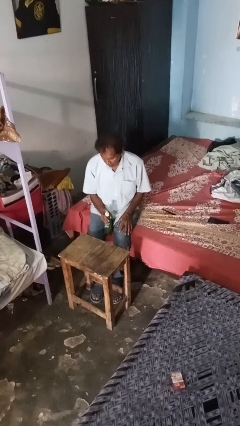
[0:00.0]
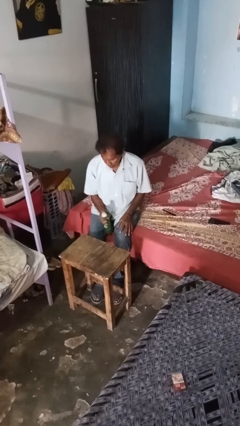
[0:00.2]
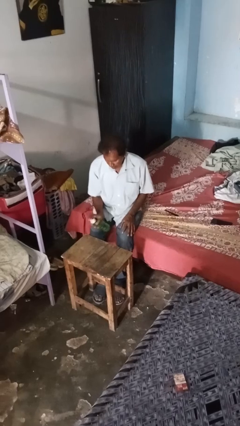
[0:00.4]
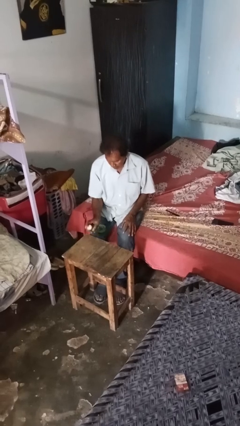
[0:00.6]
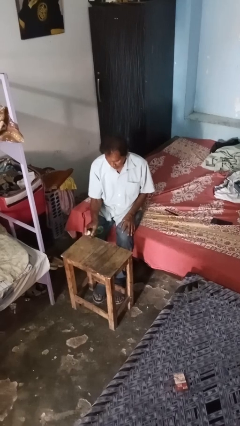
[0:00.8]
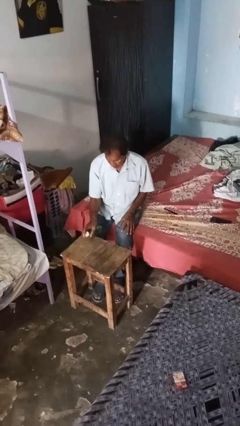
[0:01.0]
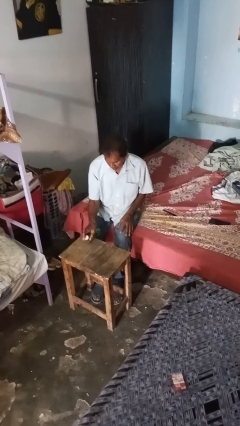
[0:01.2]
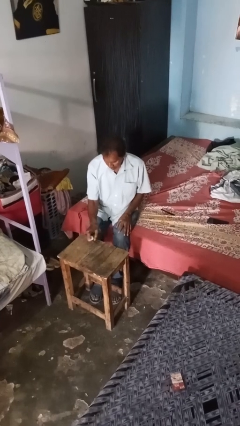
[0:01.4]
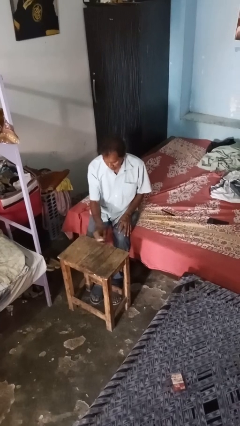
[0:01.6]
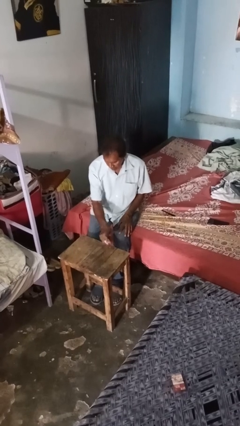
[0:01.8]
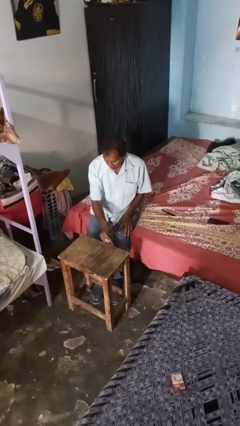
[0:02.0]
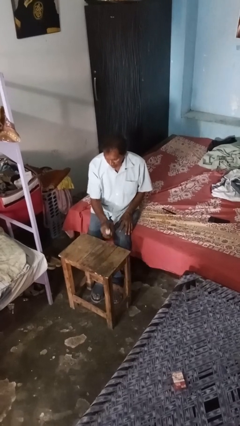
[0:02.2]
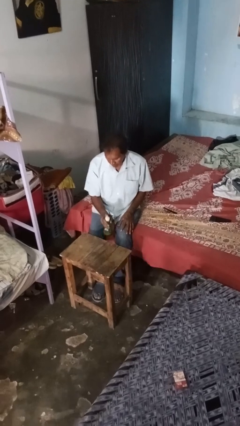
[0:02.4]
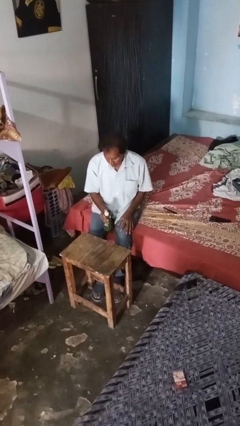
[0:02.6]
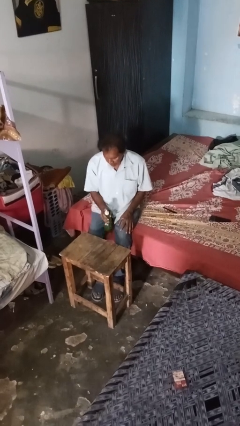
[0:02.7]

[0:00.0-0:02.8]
person sprays from bottle

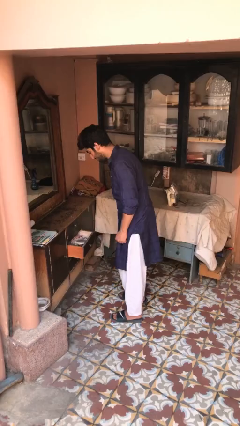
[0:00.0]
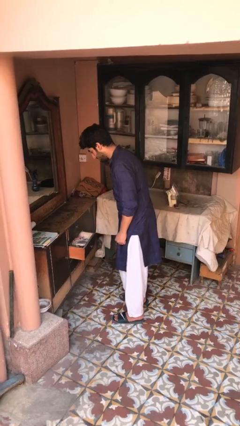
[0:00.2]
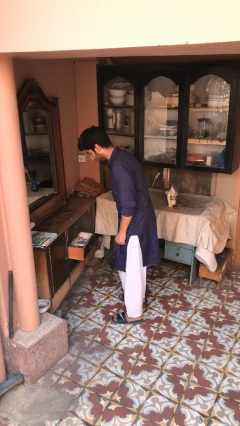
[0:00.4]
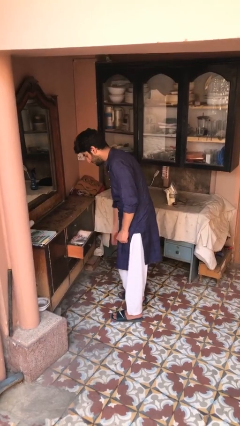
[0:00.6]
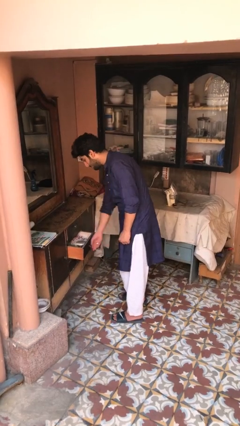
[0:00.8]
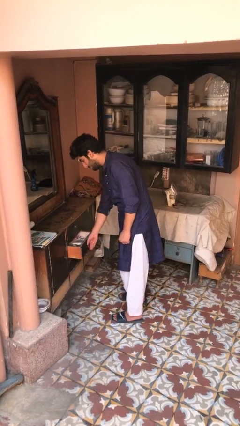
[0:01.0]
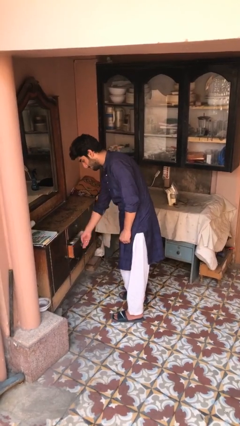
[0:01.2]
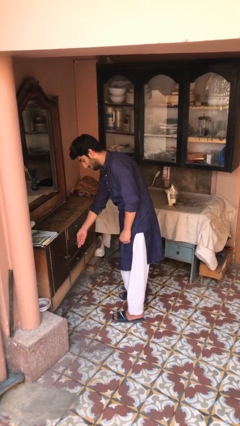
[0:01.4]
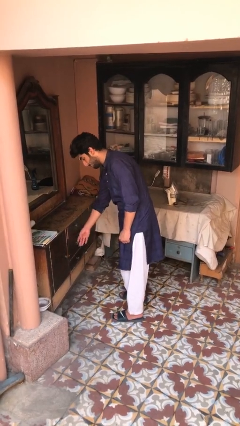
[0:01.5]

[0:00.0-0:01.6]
person closes dresser drawer

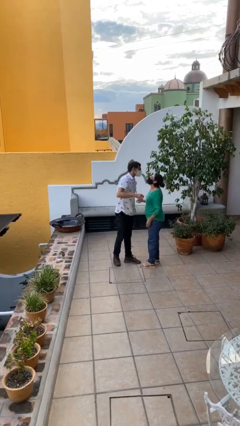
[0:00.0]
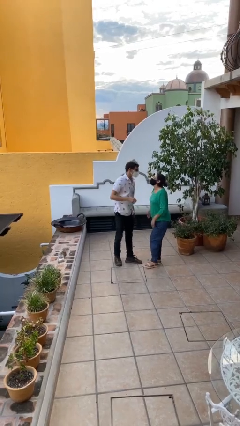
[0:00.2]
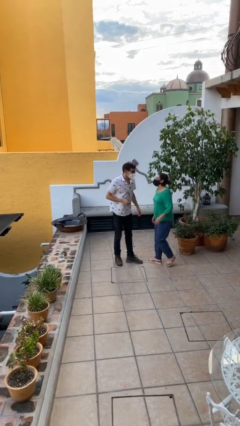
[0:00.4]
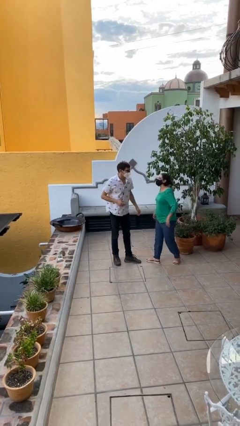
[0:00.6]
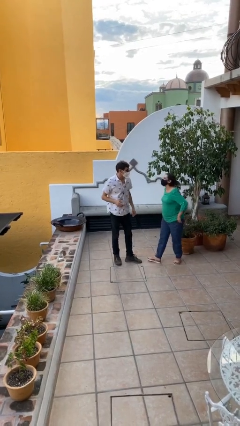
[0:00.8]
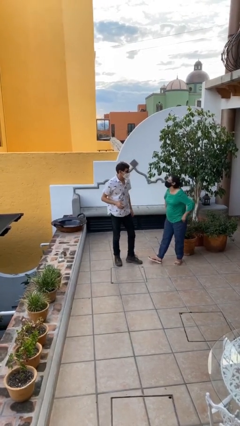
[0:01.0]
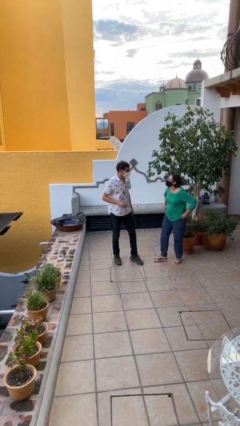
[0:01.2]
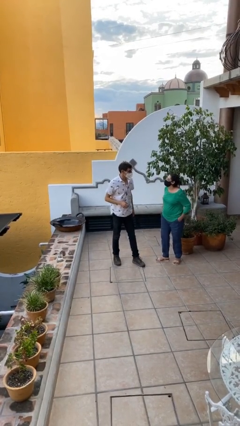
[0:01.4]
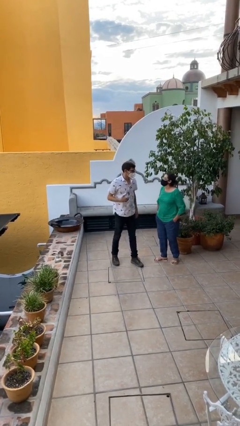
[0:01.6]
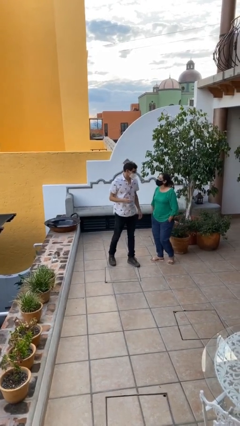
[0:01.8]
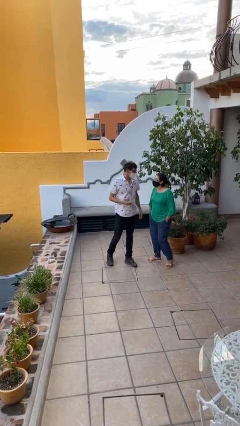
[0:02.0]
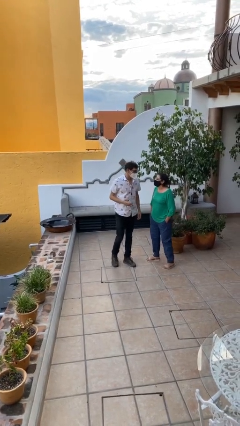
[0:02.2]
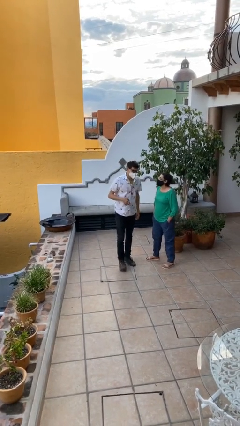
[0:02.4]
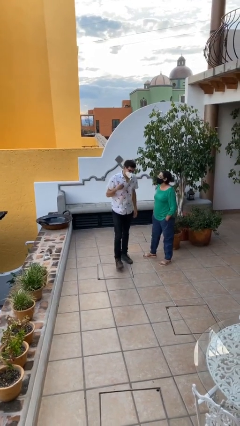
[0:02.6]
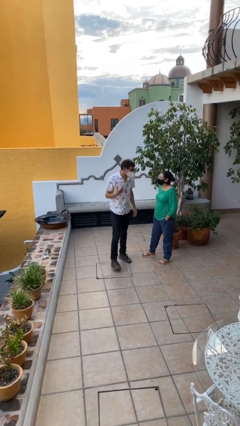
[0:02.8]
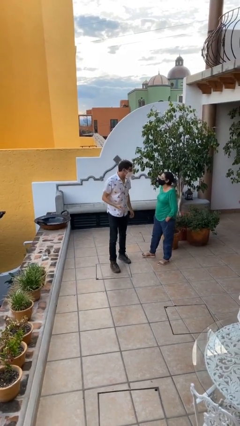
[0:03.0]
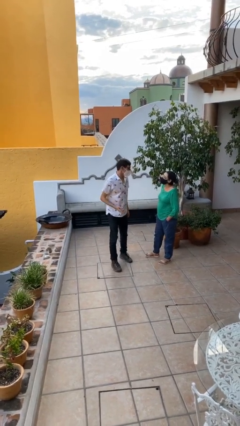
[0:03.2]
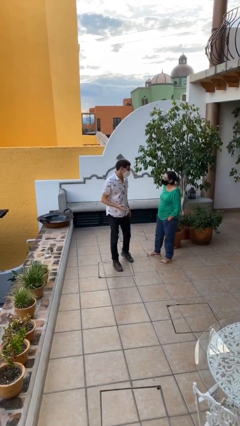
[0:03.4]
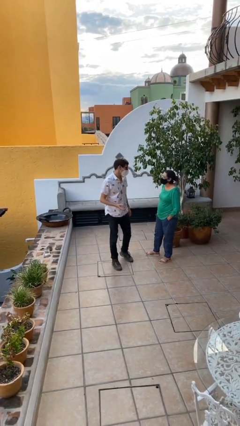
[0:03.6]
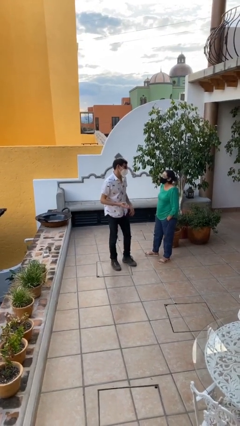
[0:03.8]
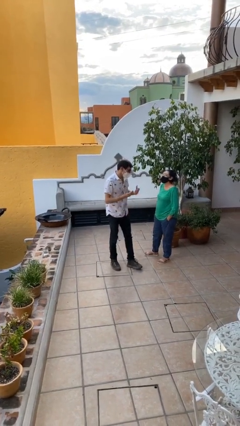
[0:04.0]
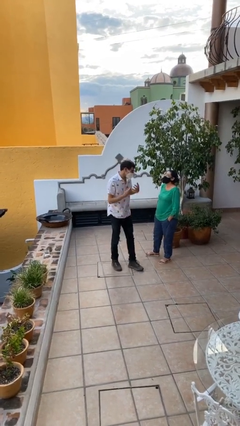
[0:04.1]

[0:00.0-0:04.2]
person talks to person

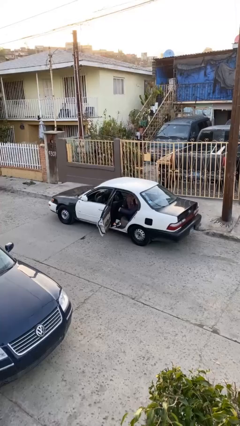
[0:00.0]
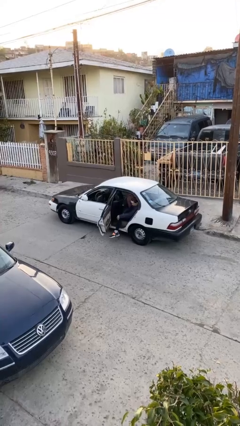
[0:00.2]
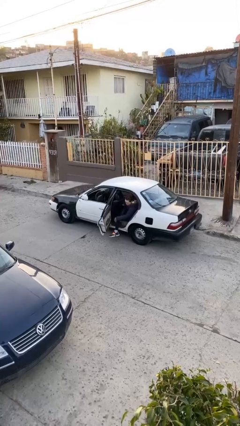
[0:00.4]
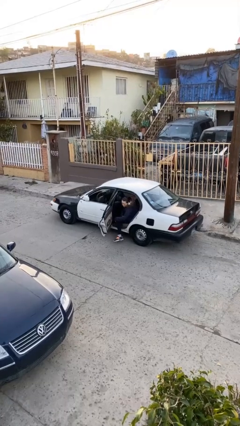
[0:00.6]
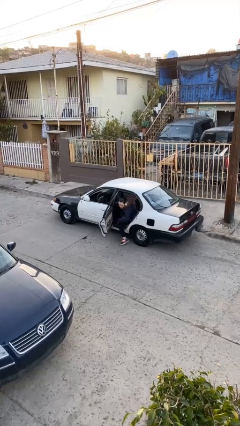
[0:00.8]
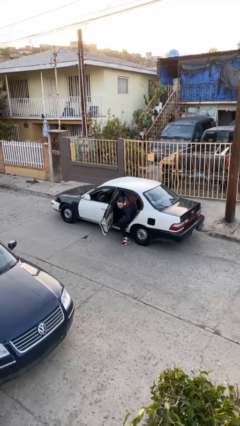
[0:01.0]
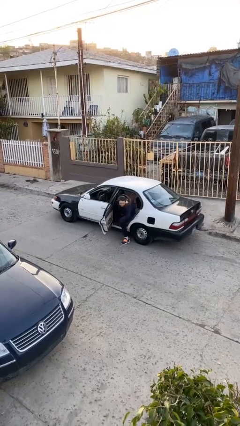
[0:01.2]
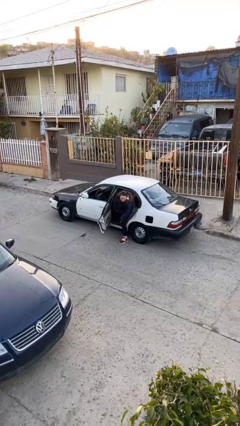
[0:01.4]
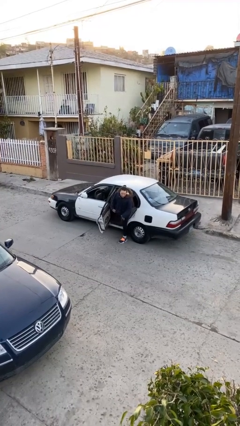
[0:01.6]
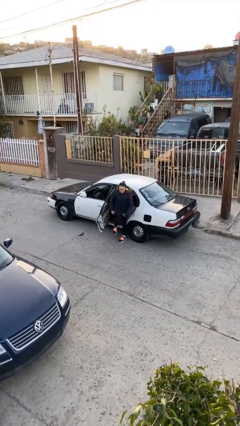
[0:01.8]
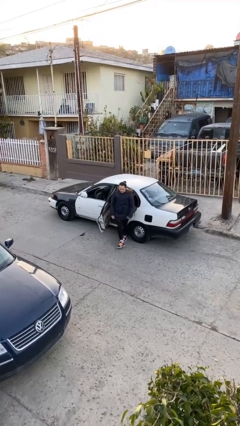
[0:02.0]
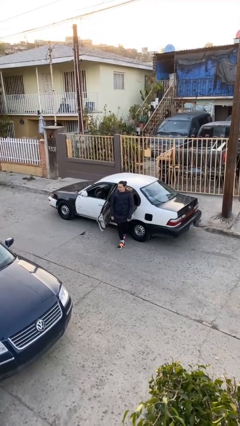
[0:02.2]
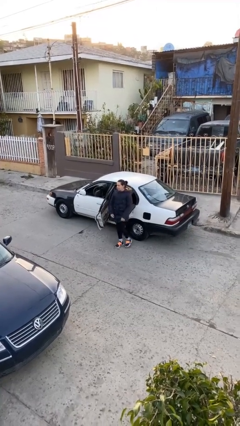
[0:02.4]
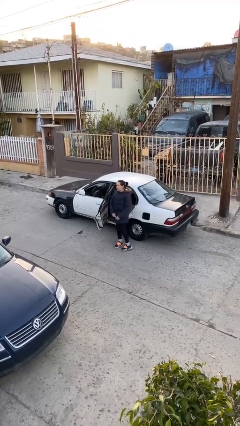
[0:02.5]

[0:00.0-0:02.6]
person exits car

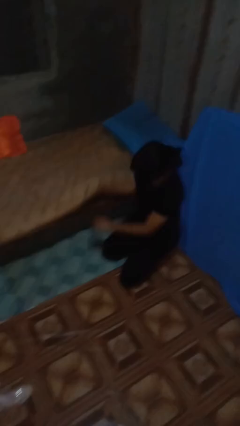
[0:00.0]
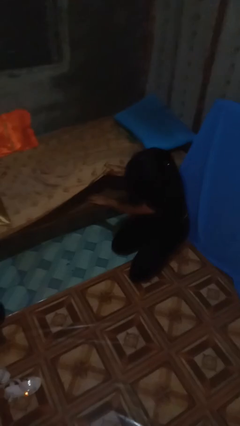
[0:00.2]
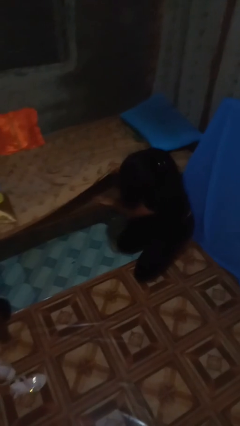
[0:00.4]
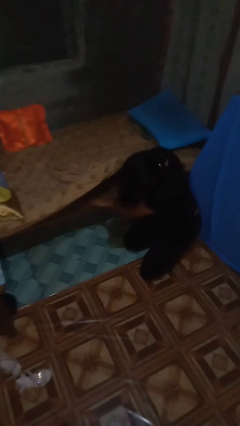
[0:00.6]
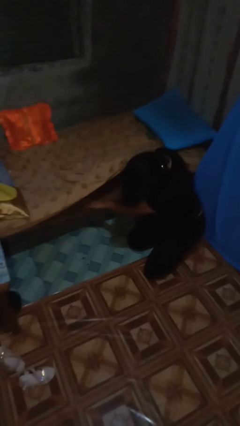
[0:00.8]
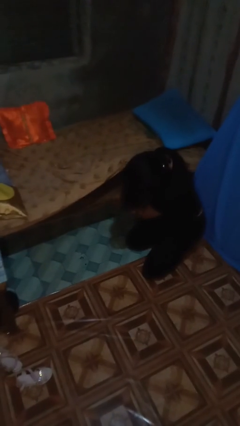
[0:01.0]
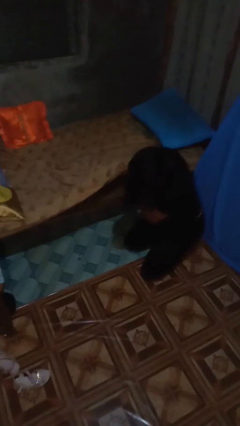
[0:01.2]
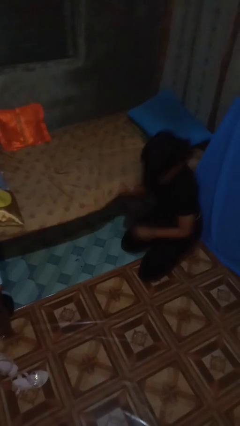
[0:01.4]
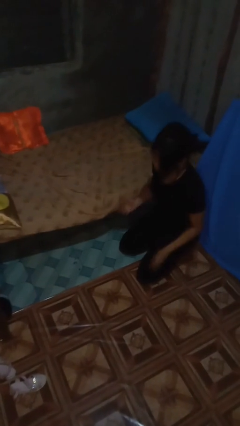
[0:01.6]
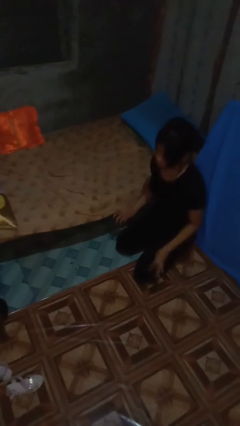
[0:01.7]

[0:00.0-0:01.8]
person searches under bed

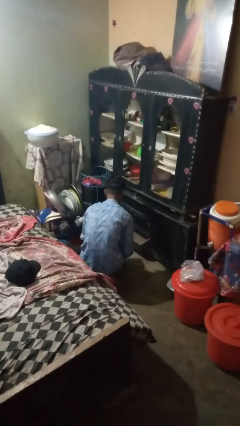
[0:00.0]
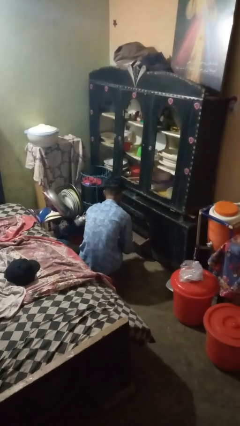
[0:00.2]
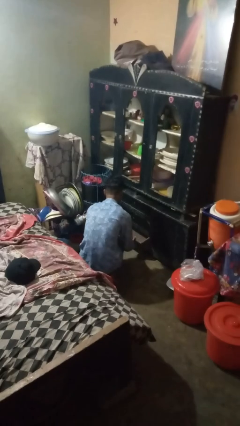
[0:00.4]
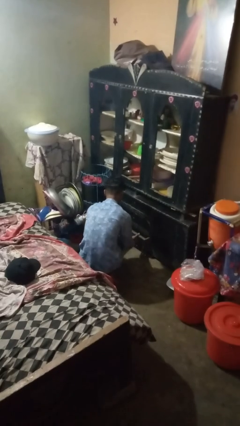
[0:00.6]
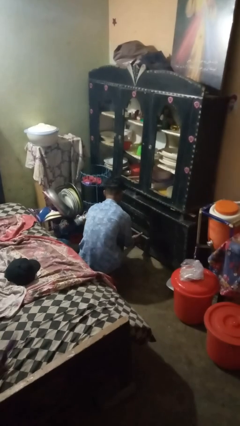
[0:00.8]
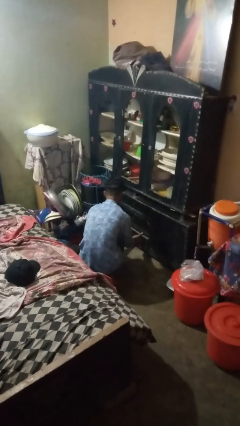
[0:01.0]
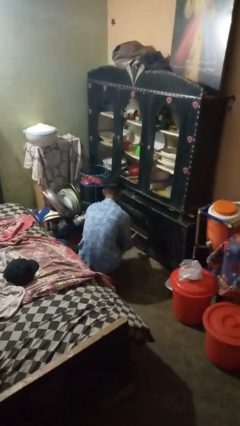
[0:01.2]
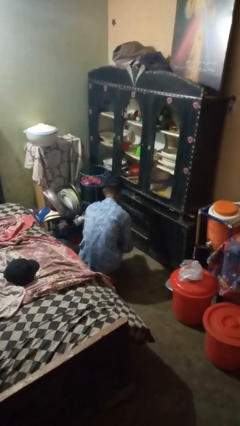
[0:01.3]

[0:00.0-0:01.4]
person closes kitchen drawer

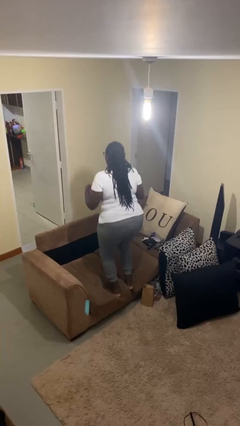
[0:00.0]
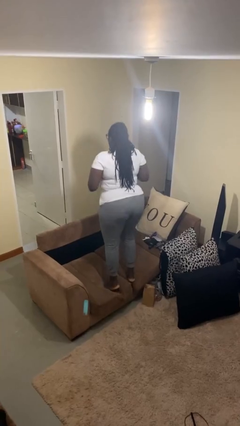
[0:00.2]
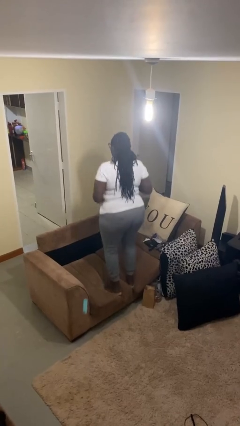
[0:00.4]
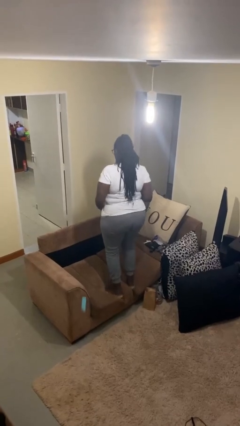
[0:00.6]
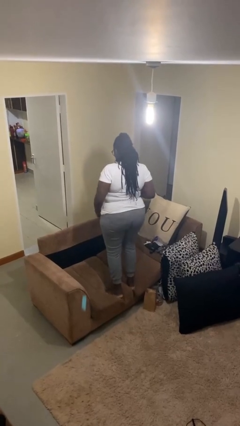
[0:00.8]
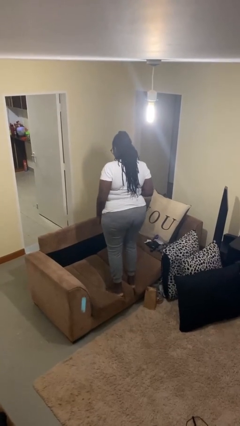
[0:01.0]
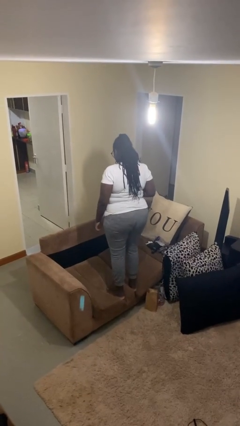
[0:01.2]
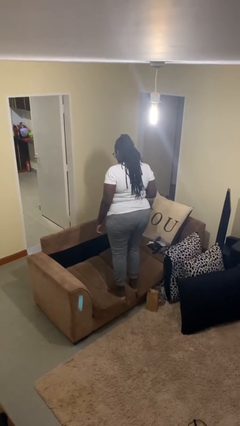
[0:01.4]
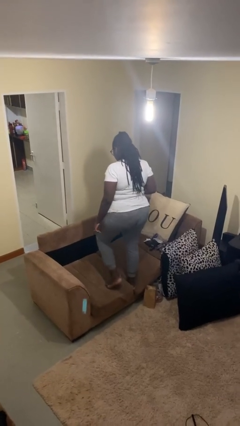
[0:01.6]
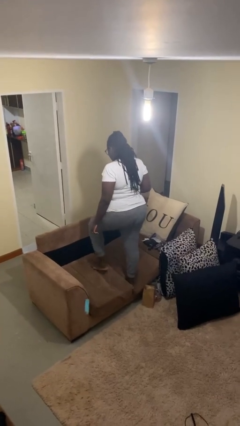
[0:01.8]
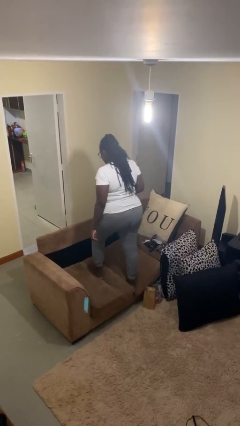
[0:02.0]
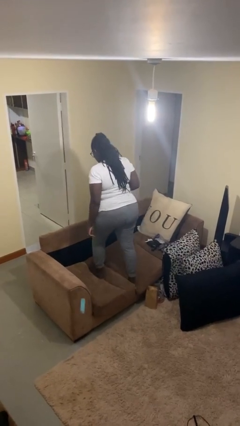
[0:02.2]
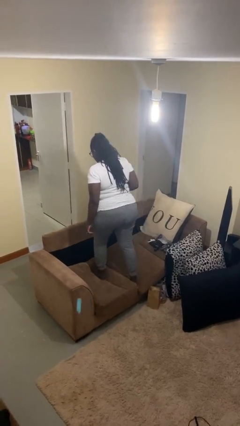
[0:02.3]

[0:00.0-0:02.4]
person jumps on couch

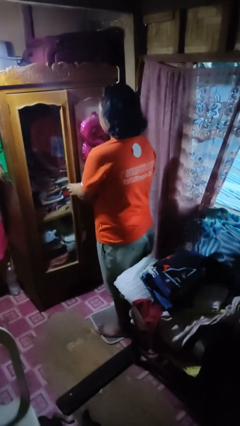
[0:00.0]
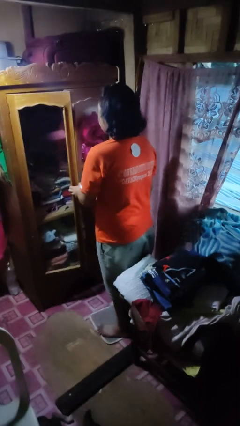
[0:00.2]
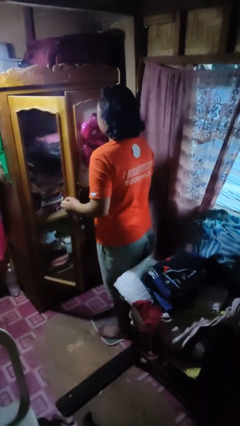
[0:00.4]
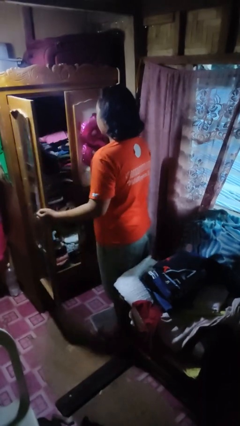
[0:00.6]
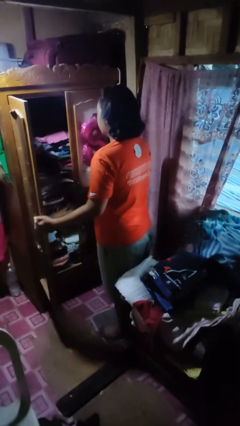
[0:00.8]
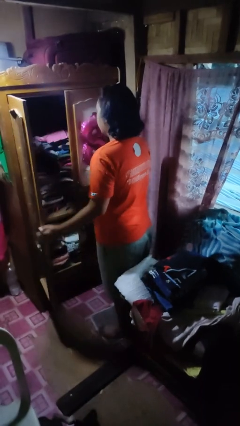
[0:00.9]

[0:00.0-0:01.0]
person opens closet door
